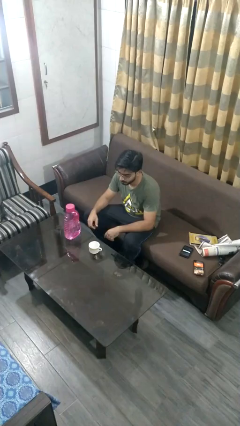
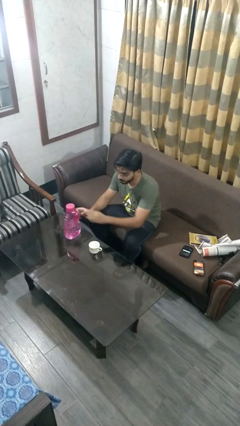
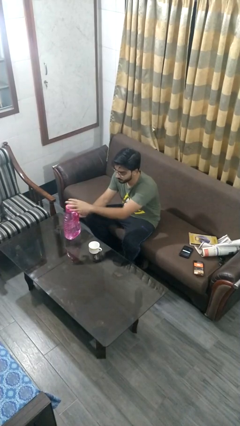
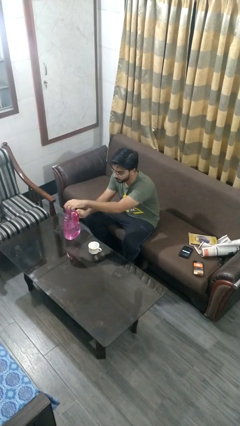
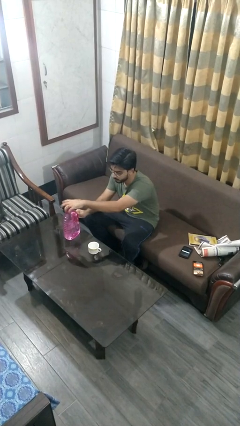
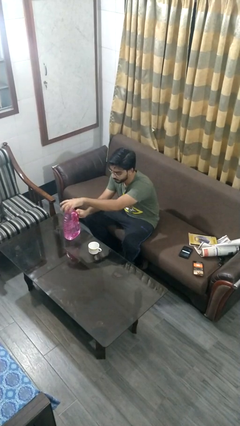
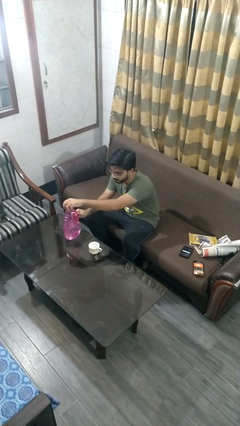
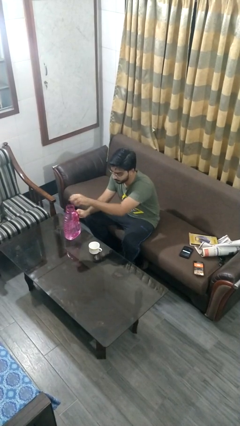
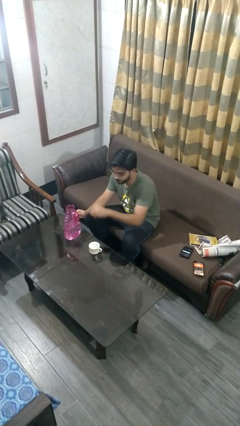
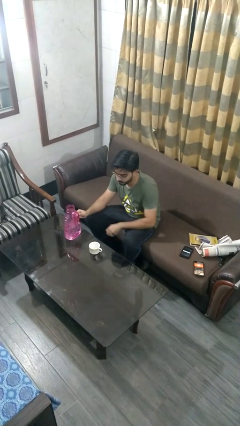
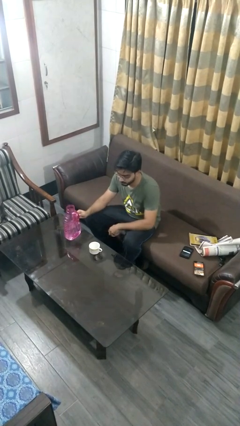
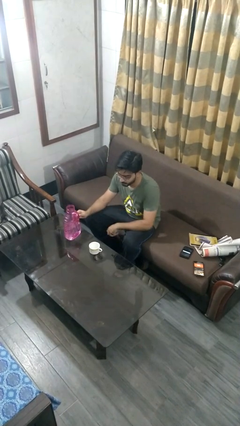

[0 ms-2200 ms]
person unscrews lid from bottle

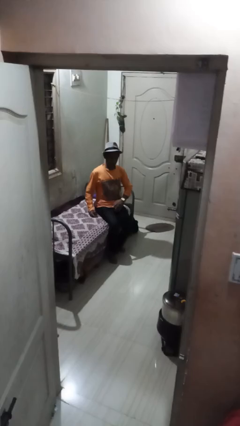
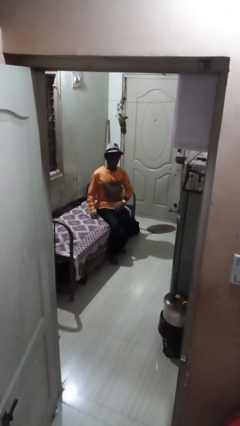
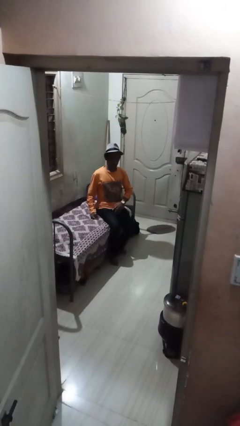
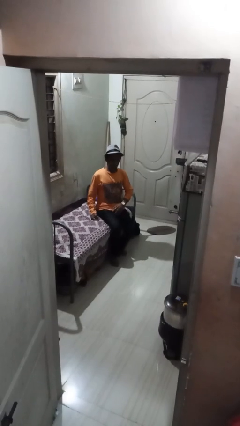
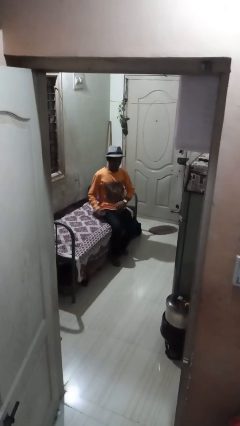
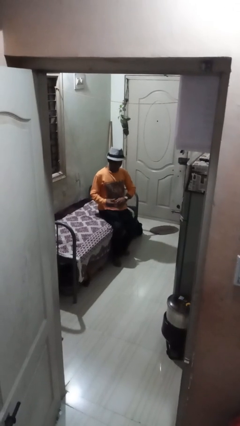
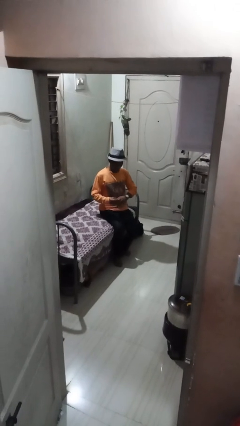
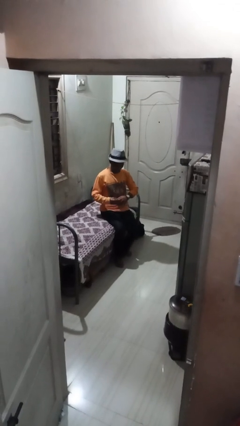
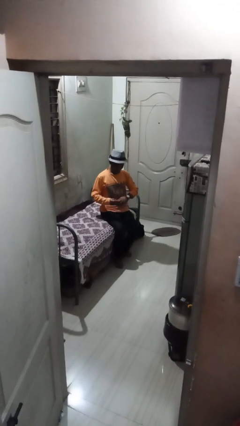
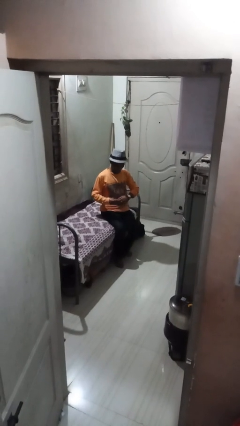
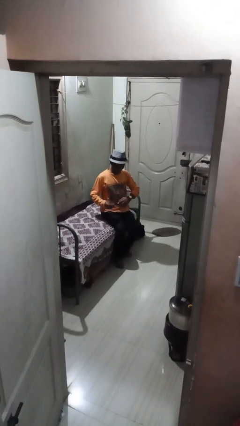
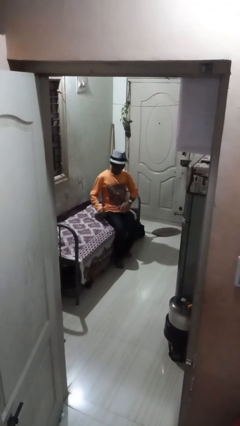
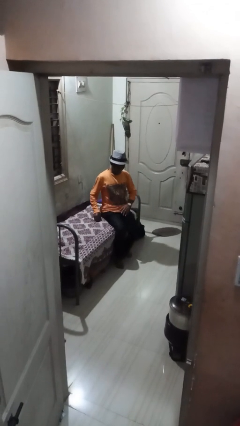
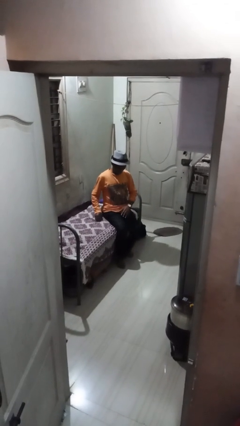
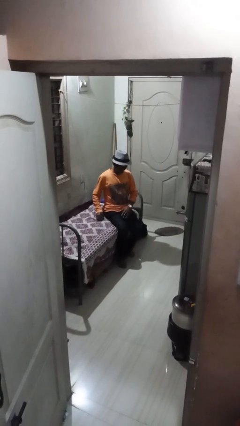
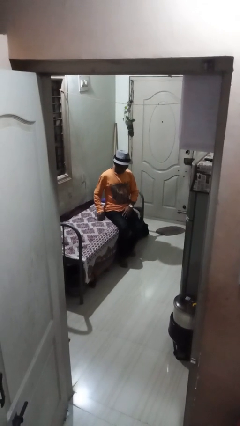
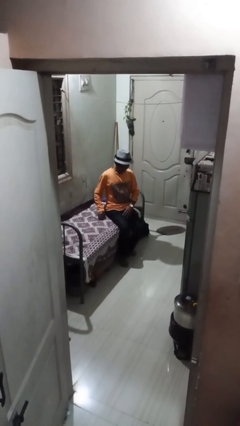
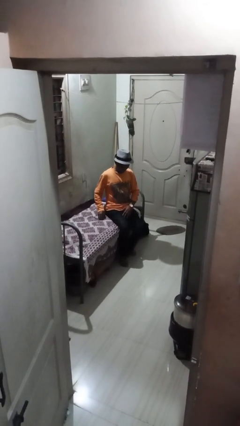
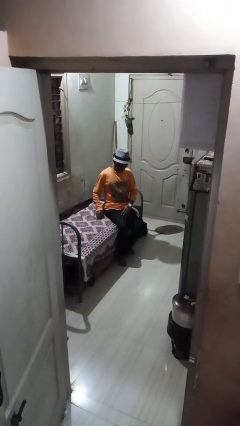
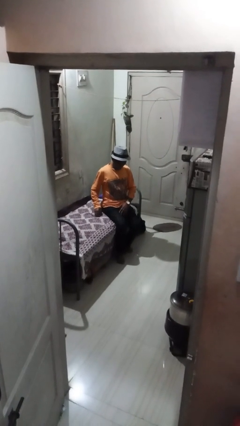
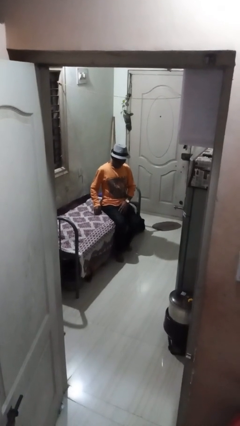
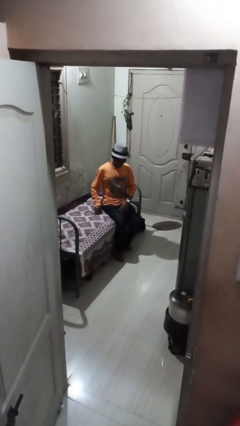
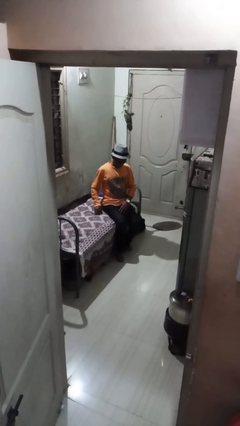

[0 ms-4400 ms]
person takes off ring

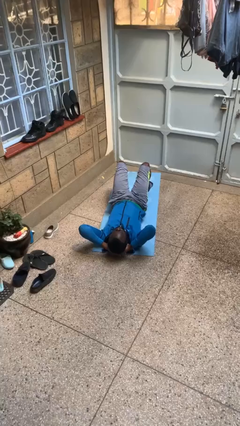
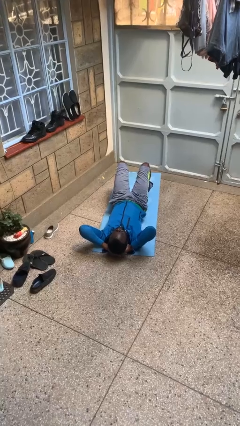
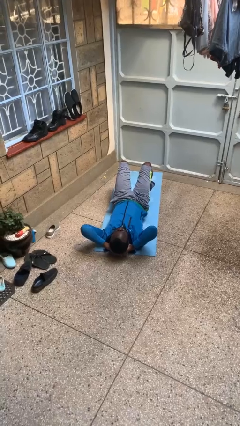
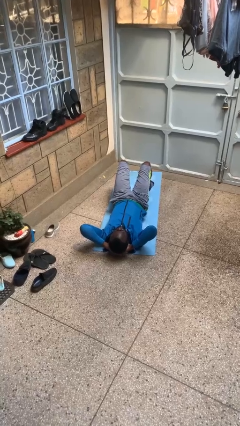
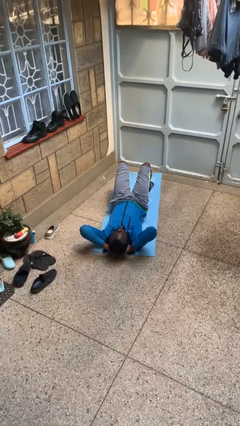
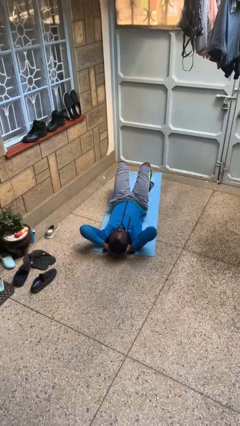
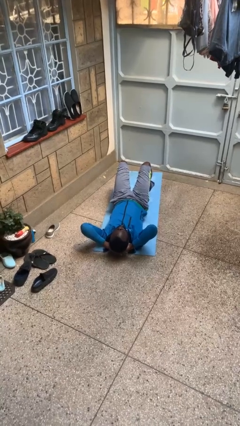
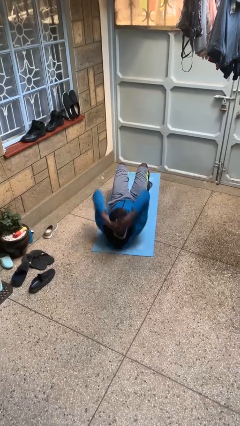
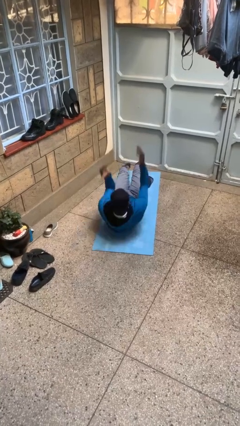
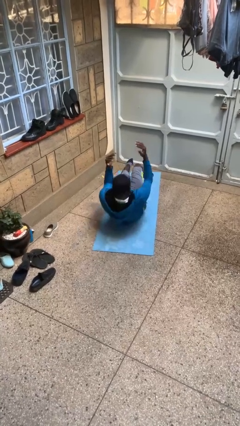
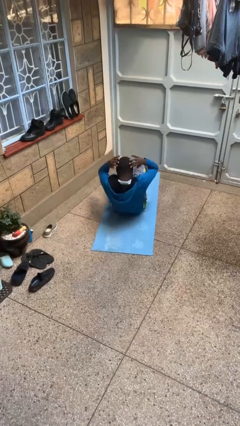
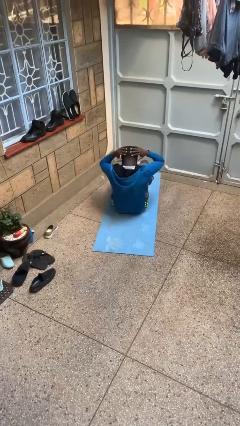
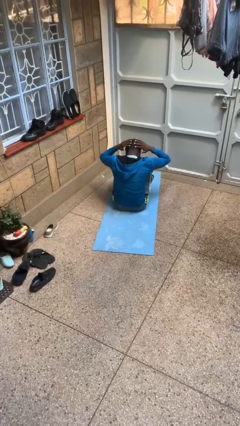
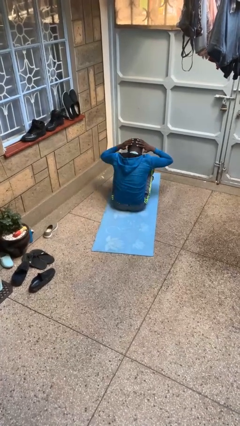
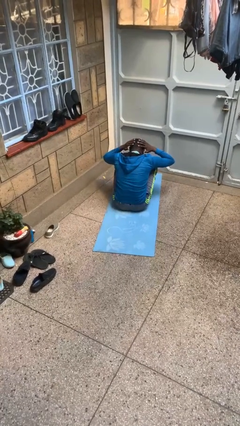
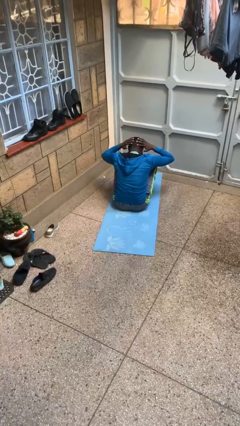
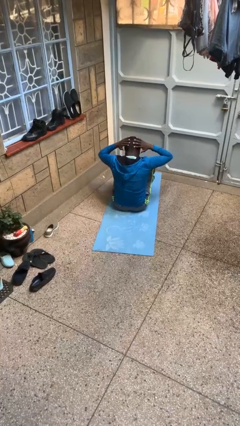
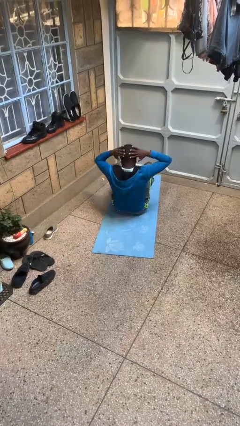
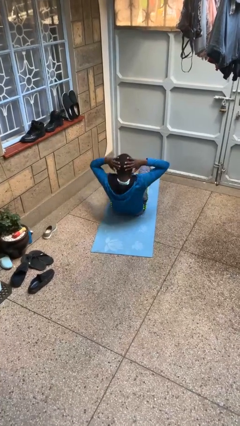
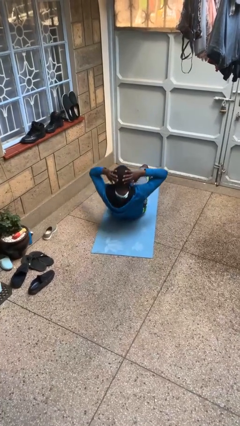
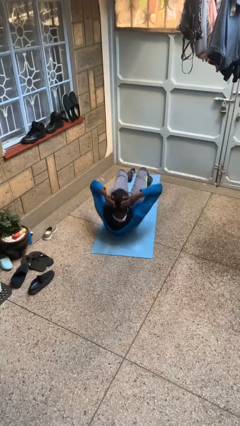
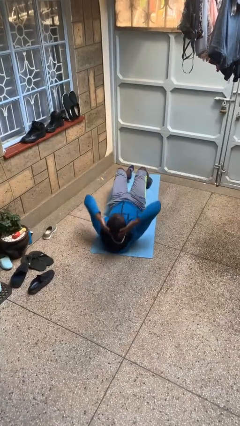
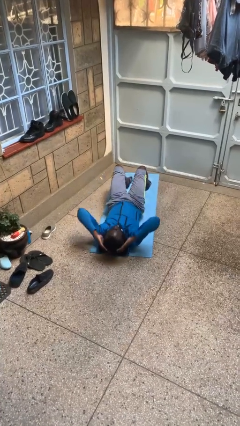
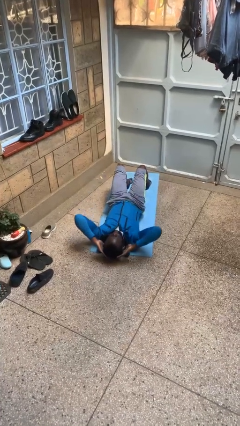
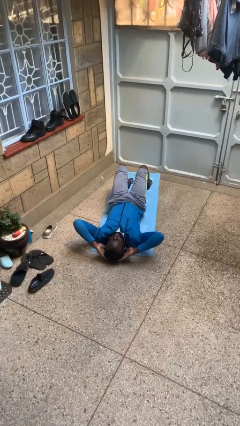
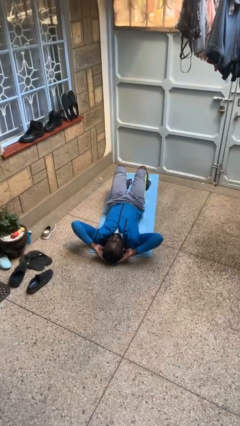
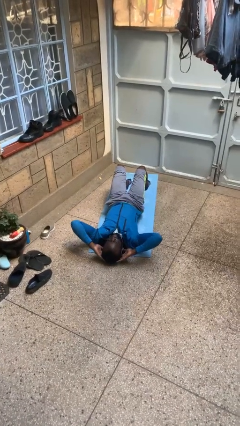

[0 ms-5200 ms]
person exercises with situp

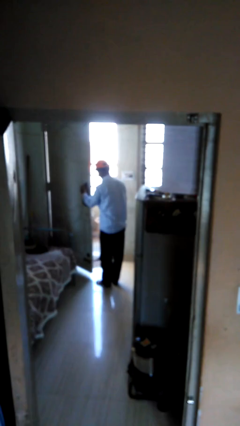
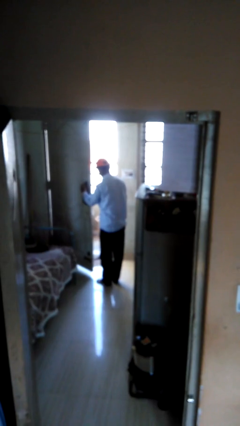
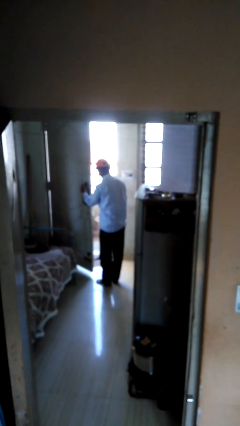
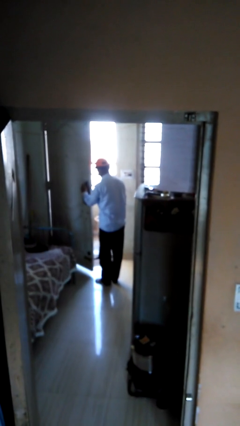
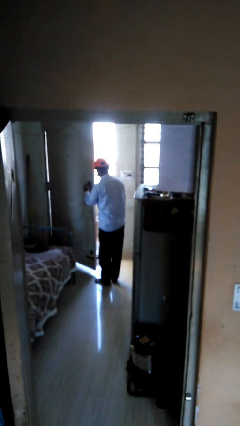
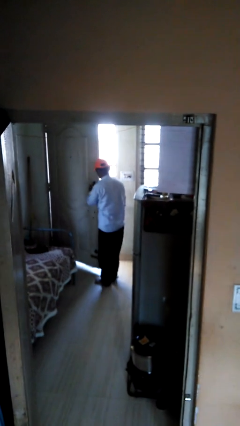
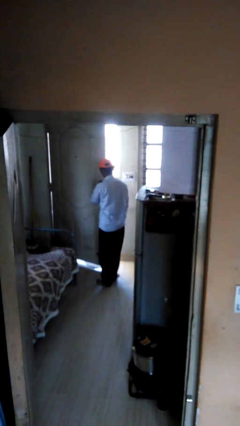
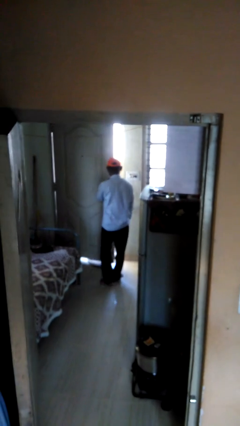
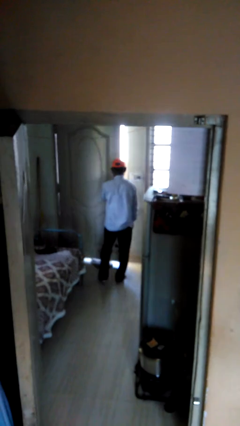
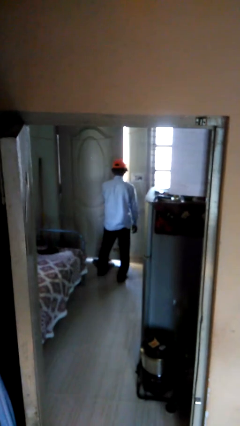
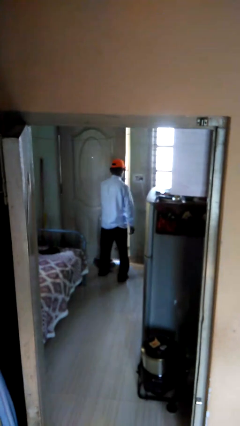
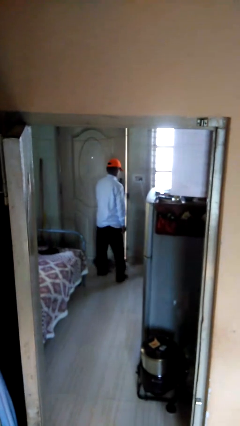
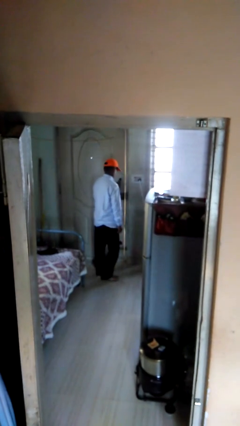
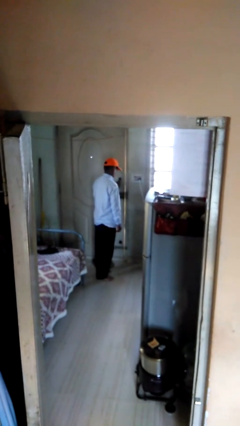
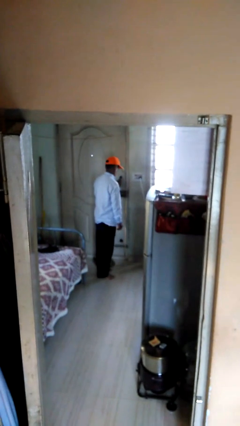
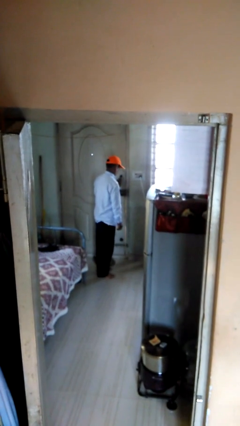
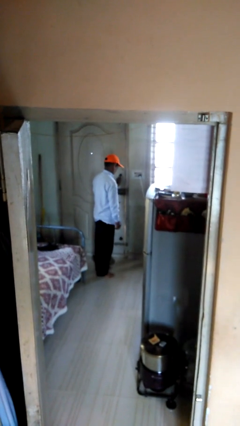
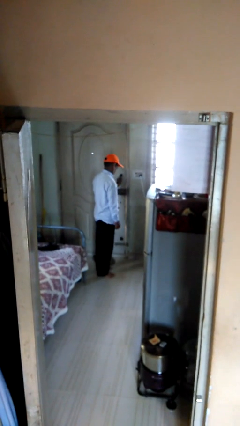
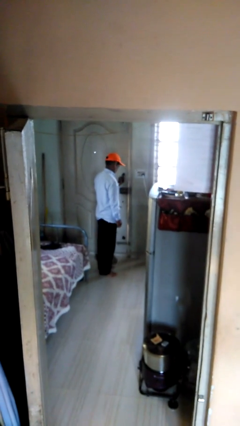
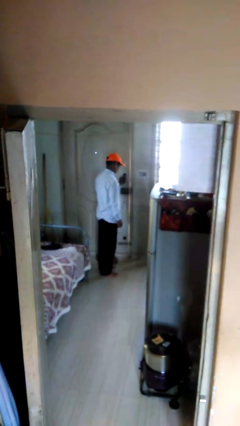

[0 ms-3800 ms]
person closes facility door

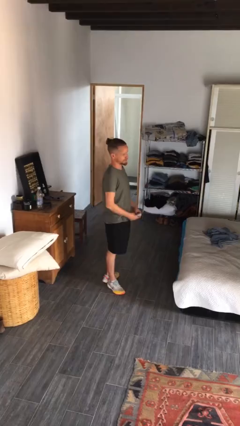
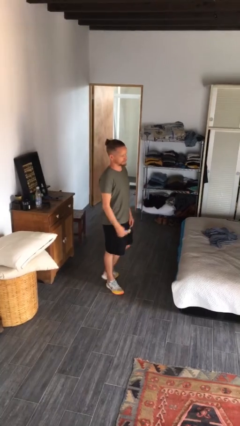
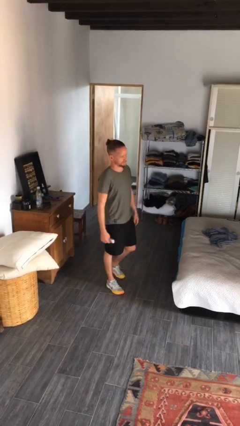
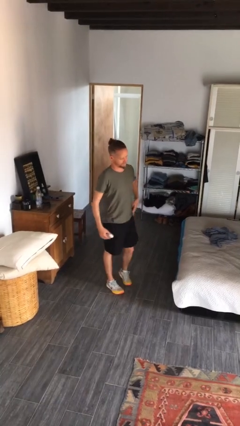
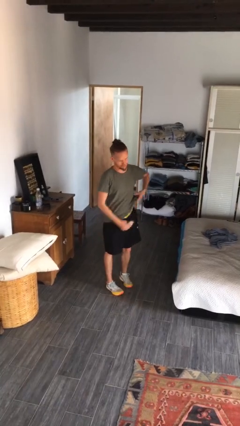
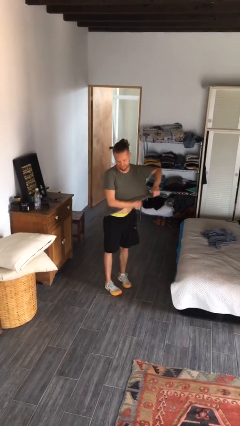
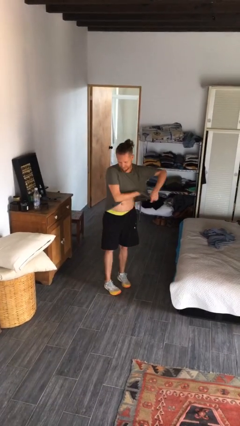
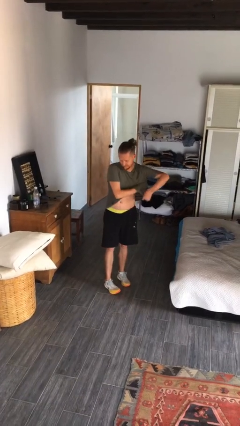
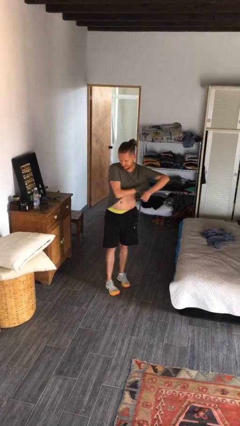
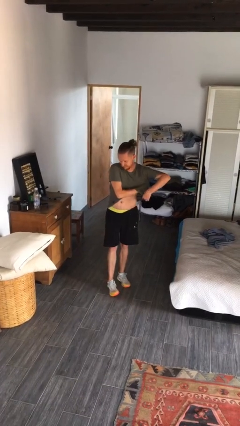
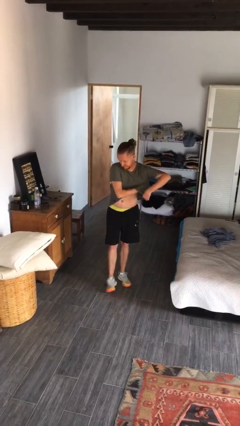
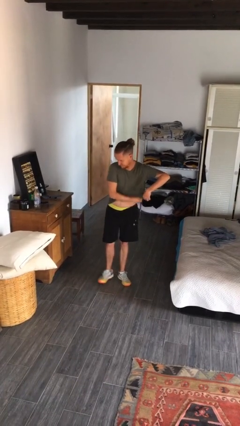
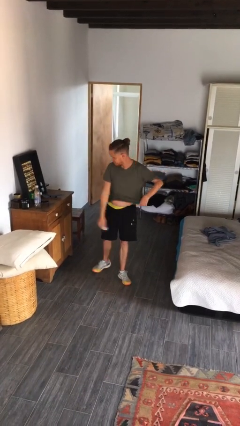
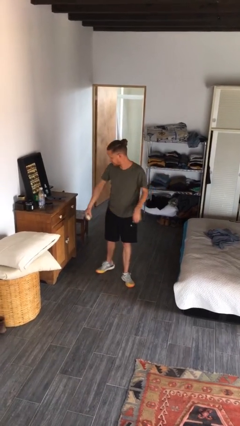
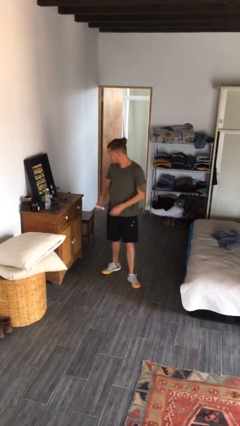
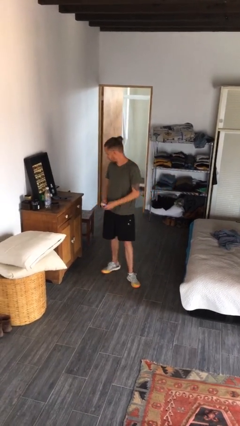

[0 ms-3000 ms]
person applies deodorant
